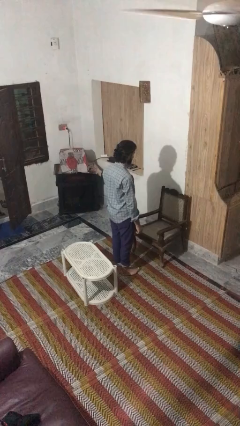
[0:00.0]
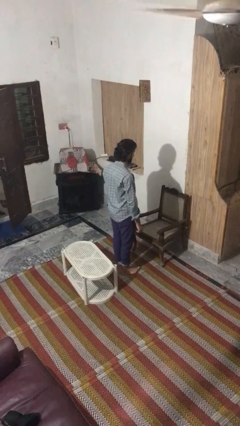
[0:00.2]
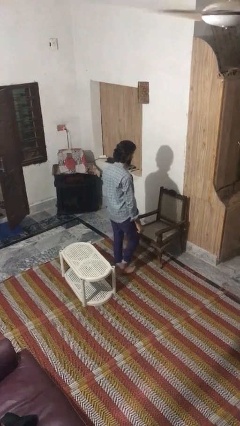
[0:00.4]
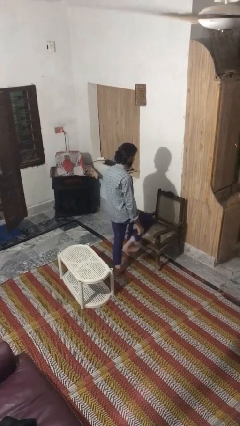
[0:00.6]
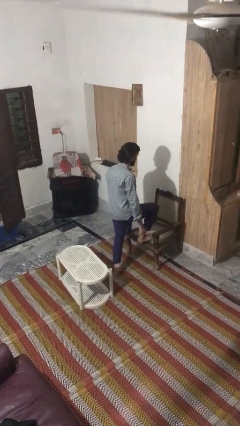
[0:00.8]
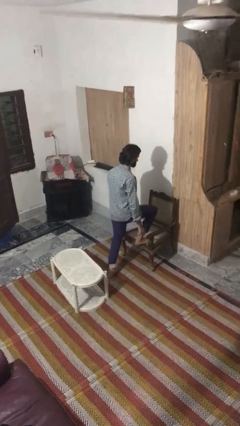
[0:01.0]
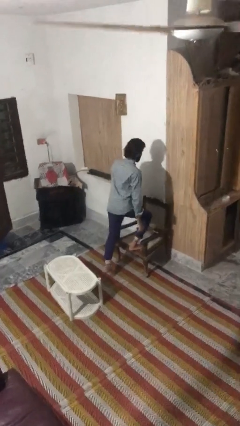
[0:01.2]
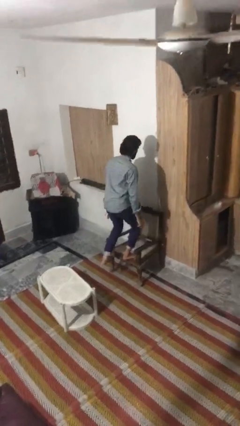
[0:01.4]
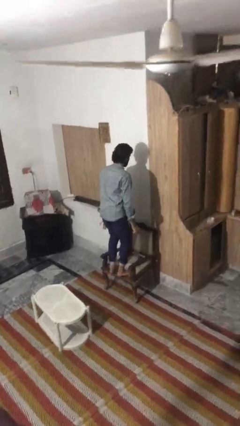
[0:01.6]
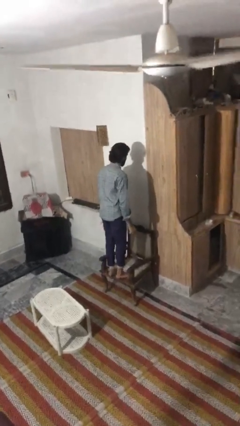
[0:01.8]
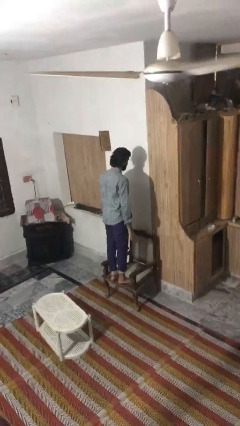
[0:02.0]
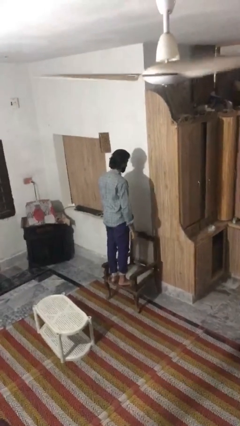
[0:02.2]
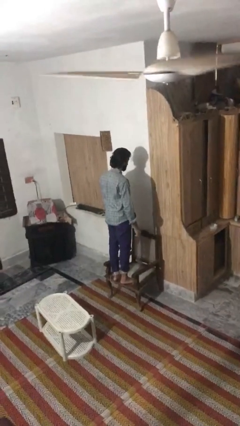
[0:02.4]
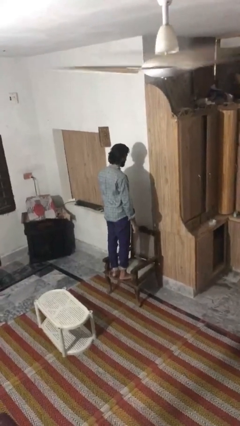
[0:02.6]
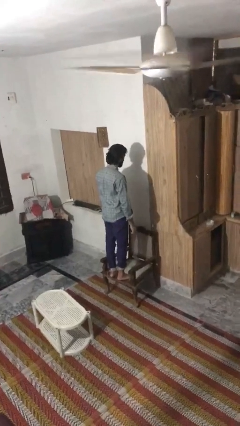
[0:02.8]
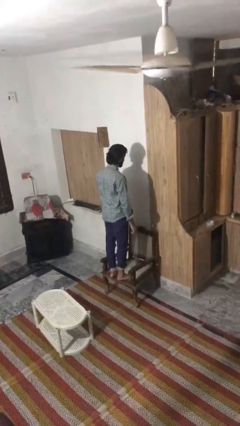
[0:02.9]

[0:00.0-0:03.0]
person climbs on chair

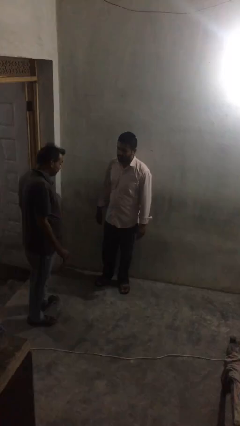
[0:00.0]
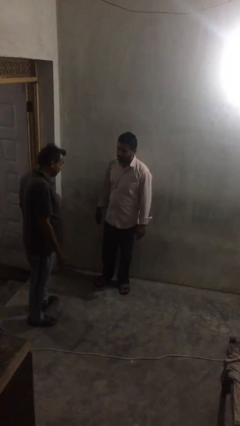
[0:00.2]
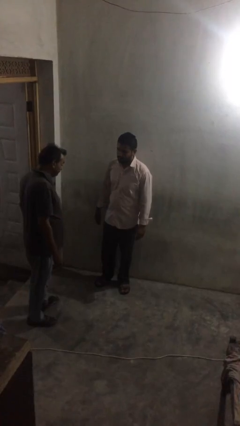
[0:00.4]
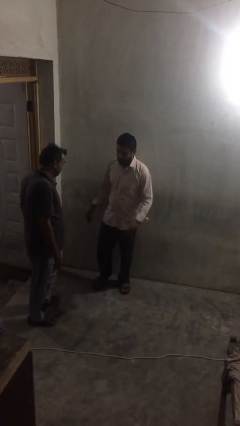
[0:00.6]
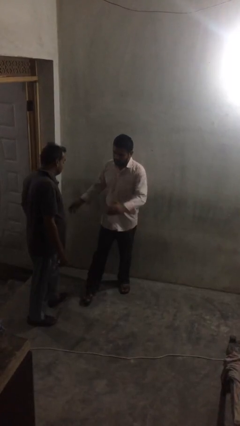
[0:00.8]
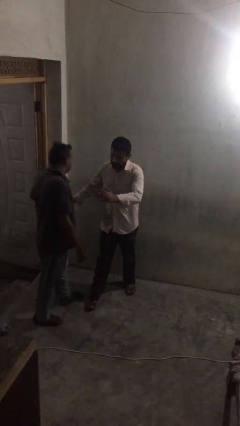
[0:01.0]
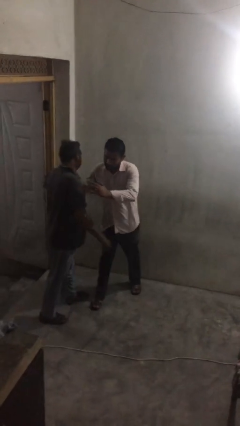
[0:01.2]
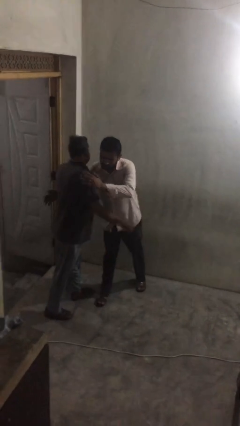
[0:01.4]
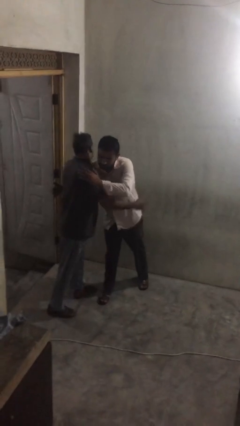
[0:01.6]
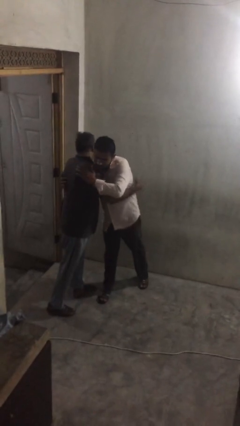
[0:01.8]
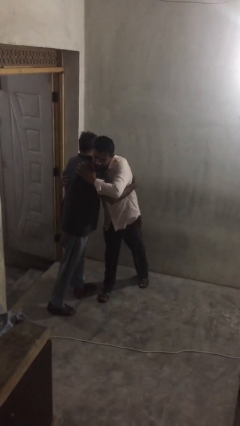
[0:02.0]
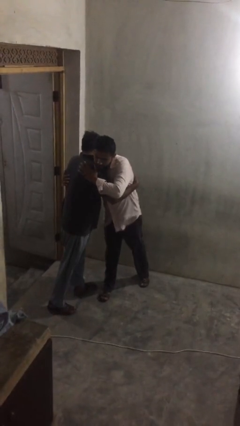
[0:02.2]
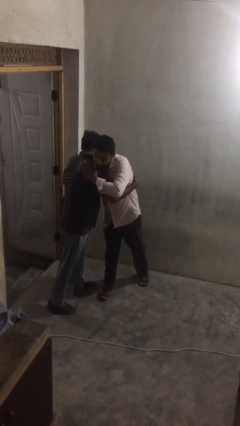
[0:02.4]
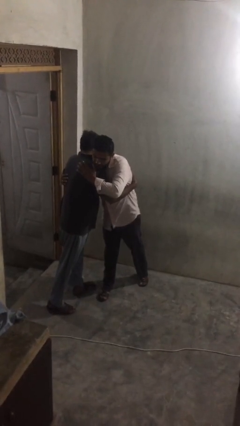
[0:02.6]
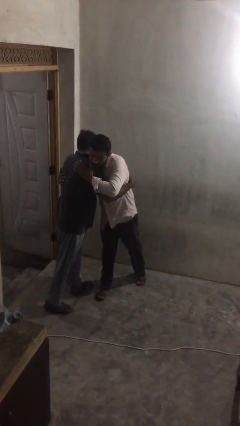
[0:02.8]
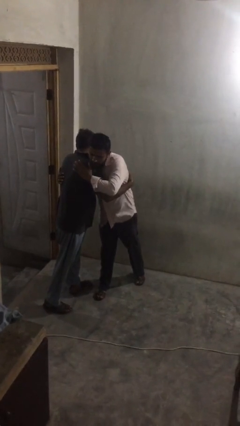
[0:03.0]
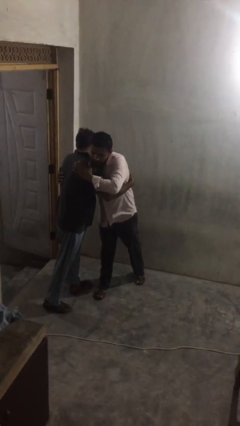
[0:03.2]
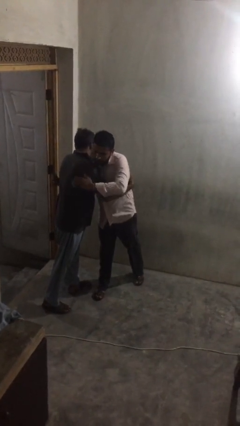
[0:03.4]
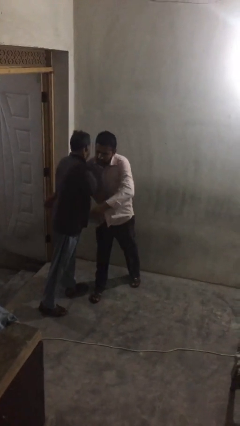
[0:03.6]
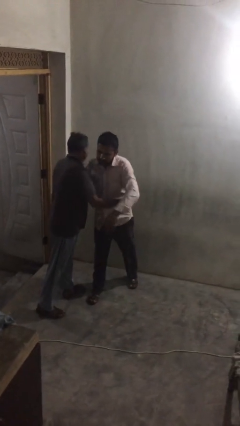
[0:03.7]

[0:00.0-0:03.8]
person embraces person

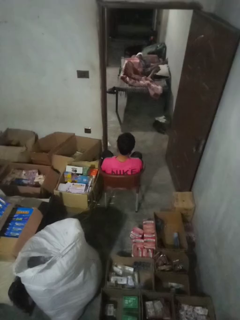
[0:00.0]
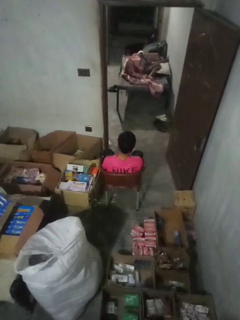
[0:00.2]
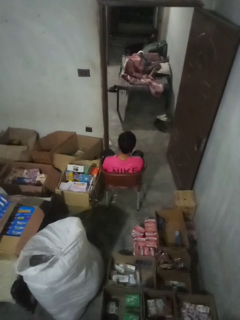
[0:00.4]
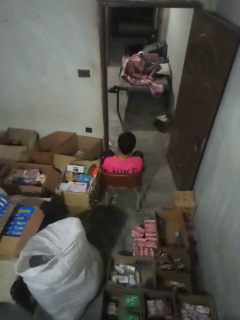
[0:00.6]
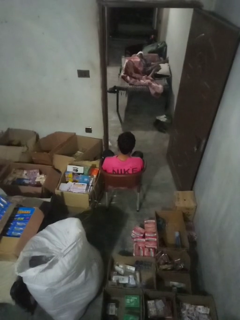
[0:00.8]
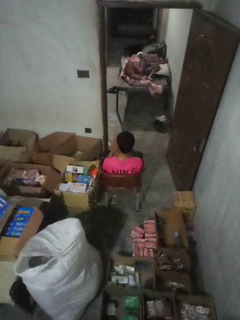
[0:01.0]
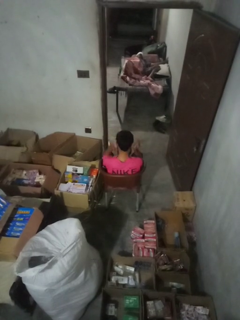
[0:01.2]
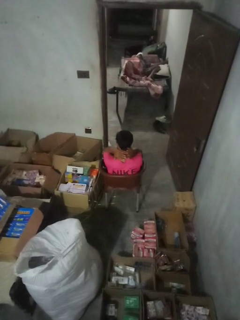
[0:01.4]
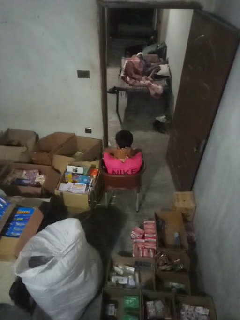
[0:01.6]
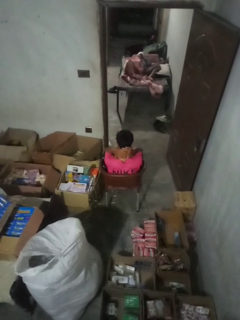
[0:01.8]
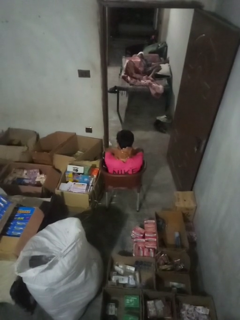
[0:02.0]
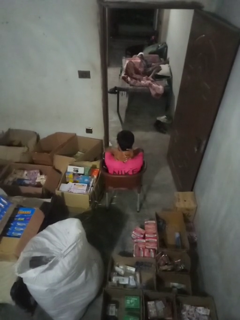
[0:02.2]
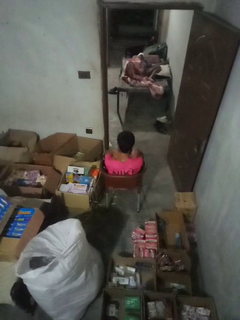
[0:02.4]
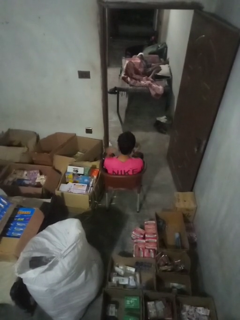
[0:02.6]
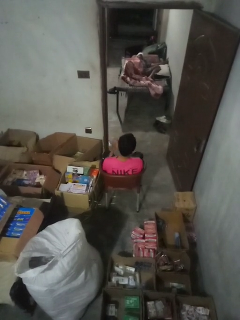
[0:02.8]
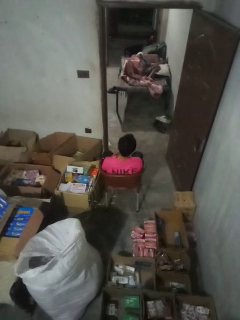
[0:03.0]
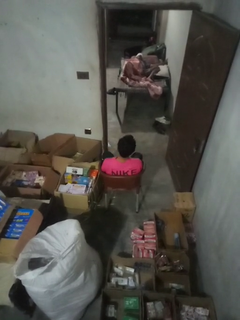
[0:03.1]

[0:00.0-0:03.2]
person rubs neck

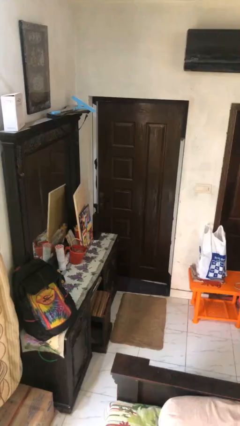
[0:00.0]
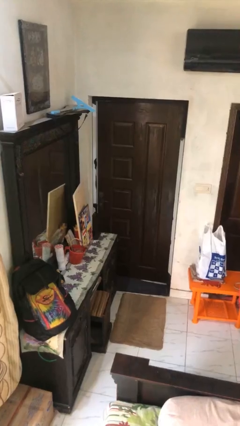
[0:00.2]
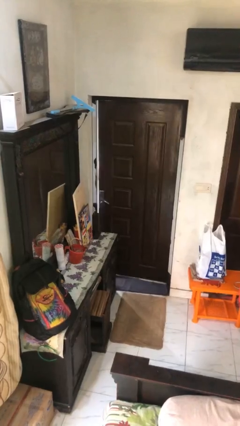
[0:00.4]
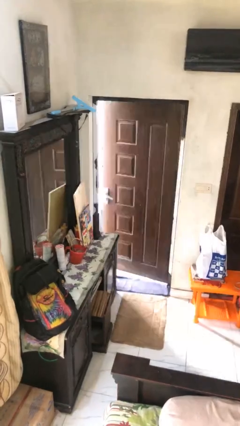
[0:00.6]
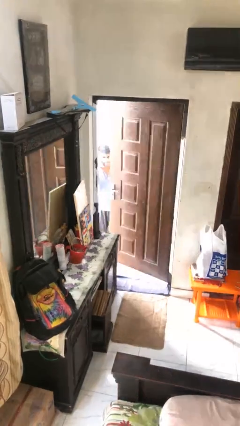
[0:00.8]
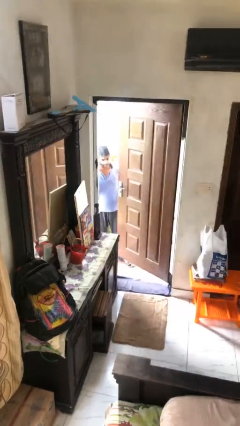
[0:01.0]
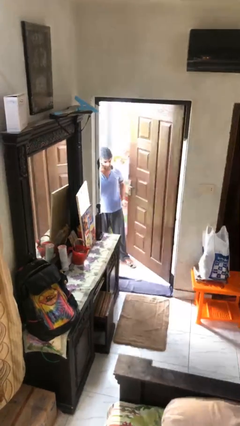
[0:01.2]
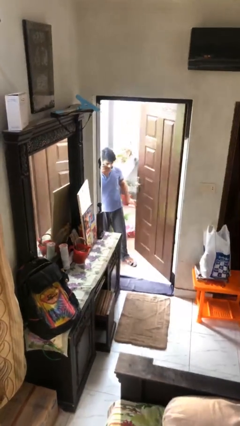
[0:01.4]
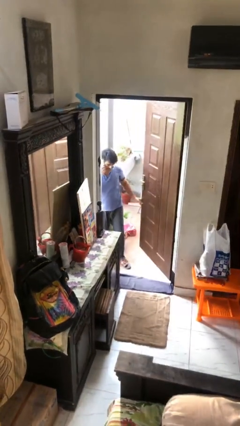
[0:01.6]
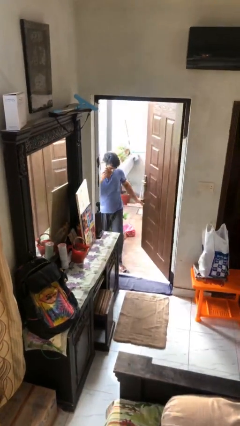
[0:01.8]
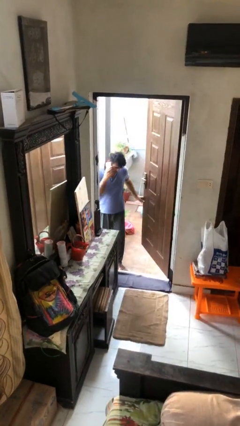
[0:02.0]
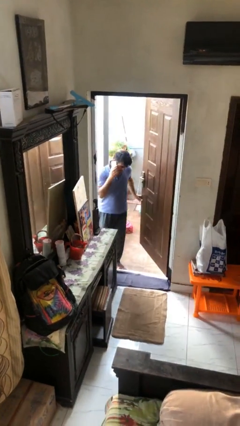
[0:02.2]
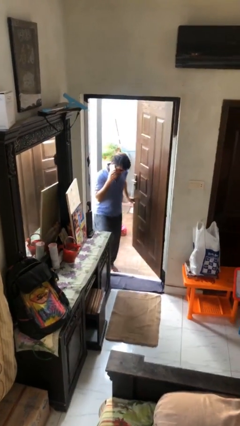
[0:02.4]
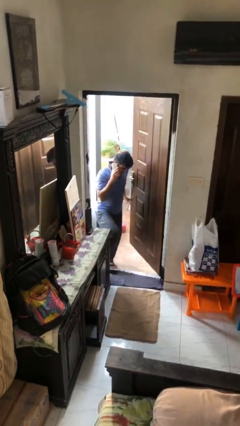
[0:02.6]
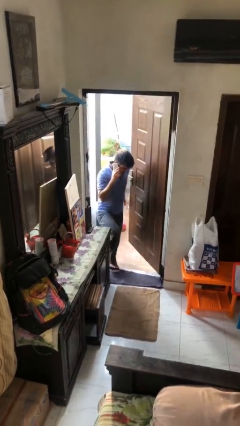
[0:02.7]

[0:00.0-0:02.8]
person opens facility door

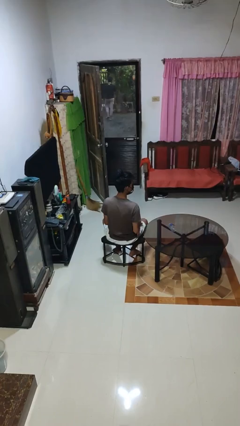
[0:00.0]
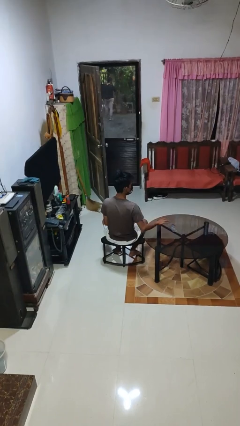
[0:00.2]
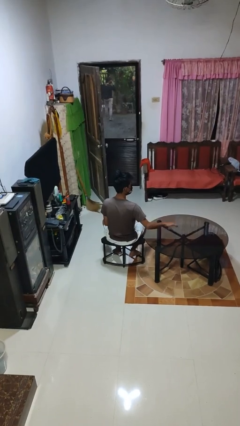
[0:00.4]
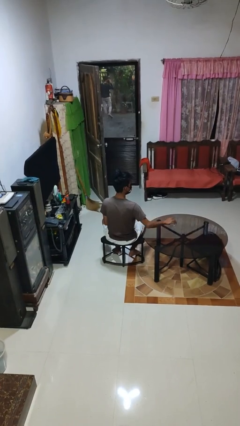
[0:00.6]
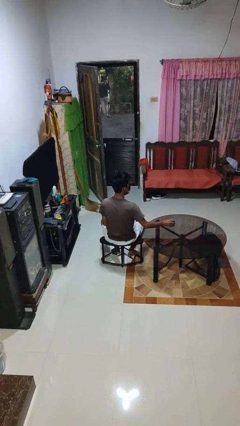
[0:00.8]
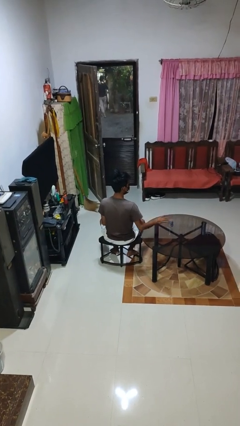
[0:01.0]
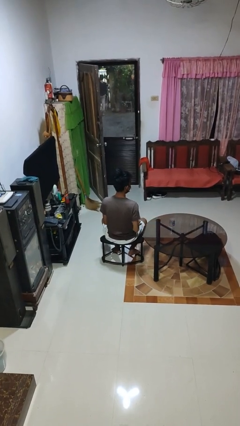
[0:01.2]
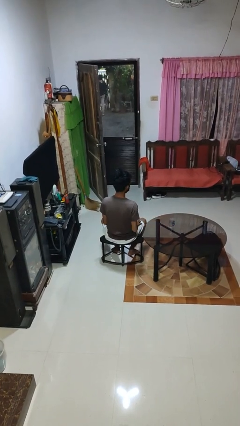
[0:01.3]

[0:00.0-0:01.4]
person sets upright glass

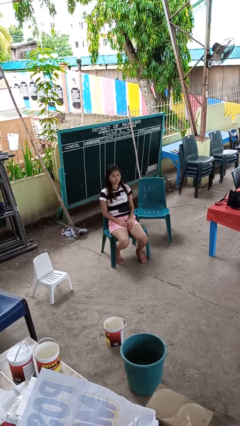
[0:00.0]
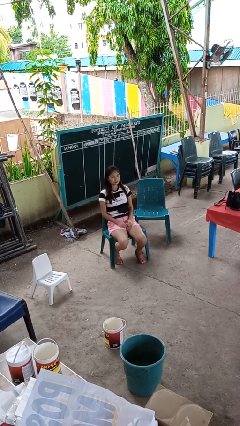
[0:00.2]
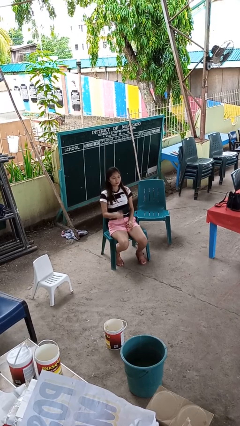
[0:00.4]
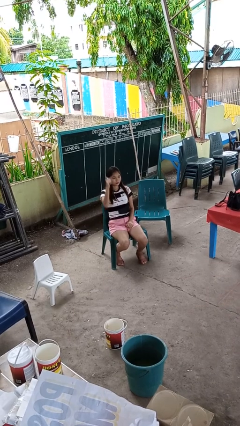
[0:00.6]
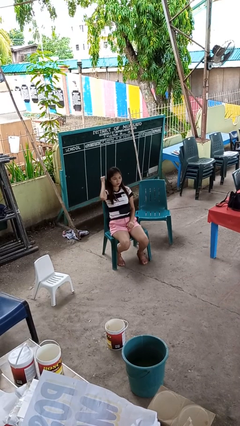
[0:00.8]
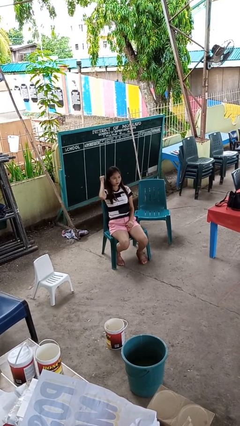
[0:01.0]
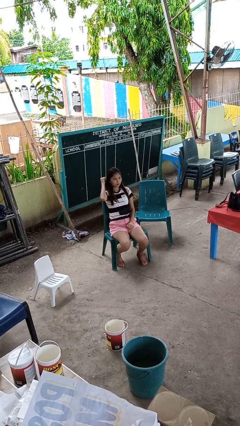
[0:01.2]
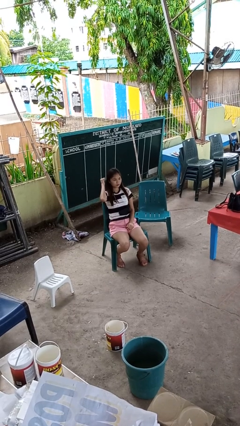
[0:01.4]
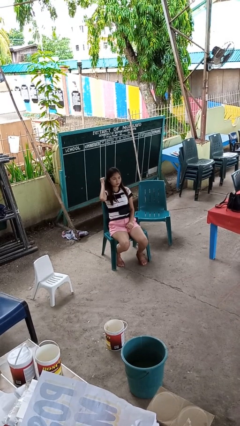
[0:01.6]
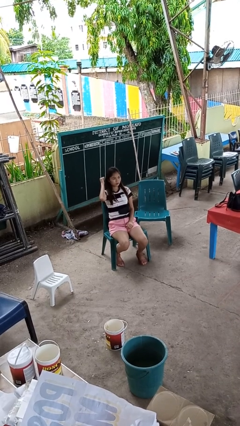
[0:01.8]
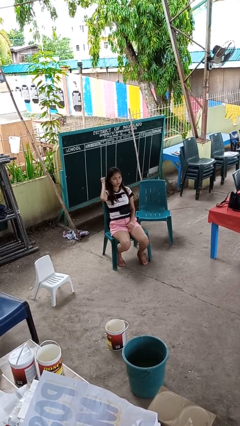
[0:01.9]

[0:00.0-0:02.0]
person gestures behind me

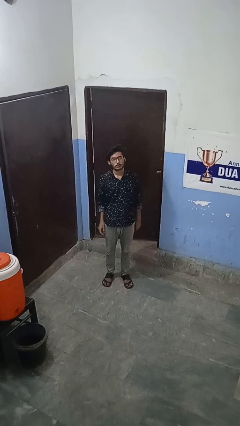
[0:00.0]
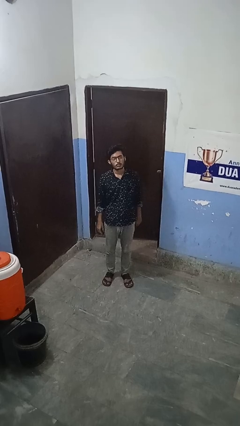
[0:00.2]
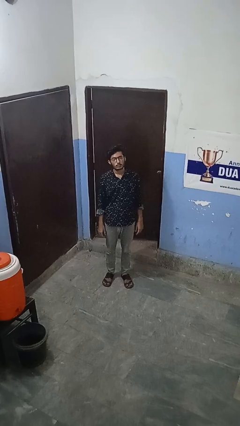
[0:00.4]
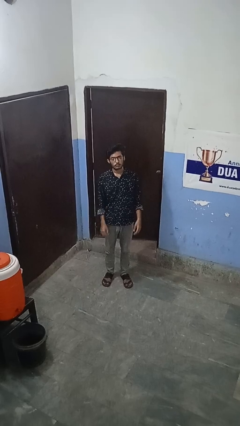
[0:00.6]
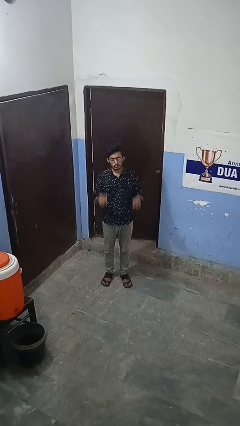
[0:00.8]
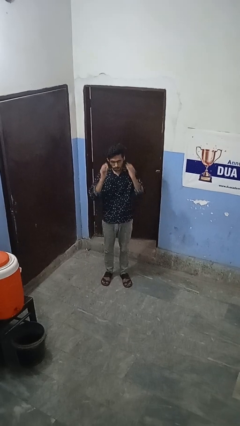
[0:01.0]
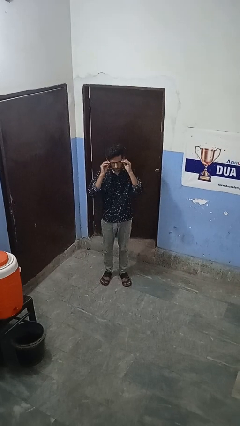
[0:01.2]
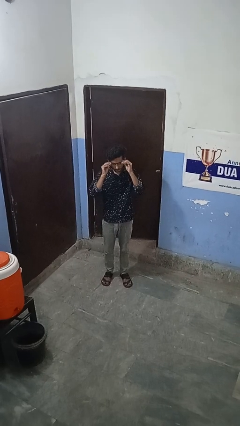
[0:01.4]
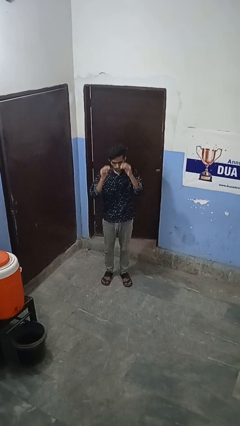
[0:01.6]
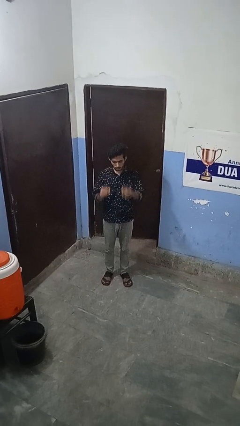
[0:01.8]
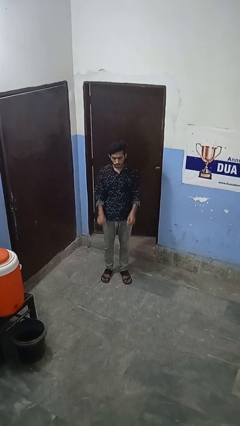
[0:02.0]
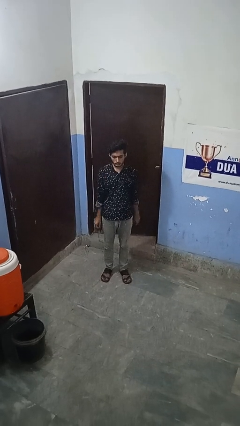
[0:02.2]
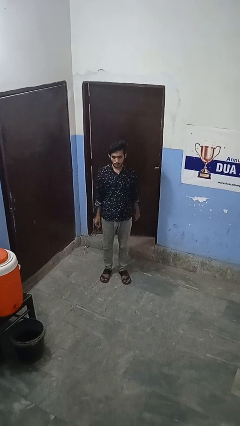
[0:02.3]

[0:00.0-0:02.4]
person takes off glasses
